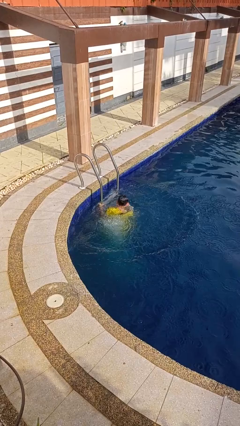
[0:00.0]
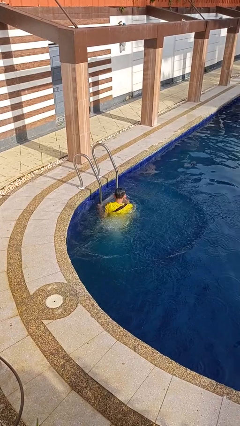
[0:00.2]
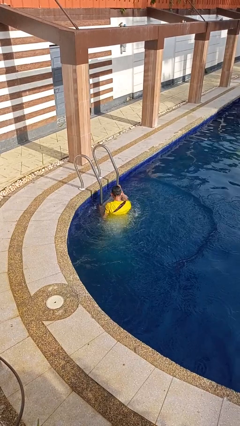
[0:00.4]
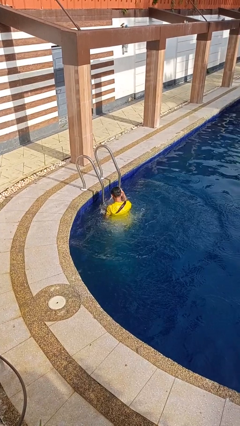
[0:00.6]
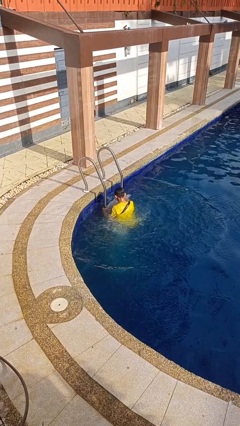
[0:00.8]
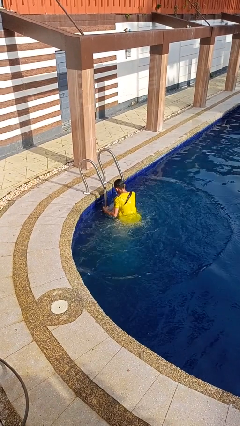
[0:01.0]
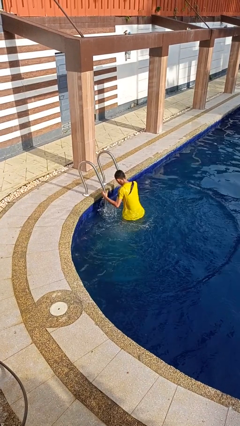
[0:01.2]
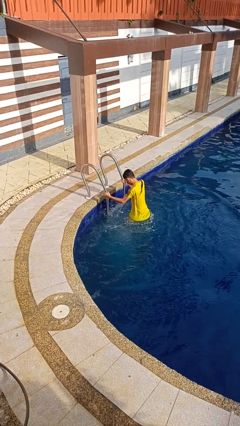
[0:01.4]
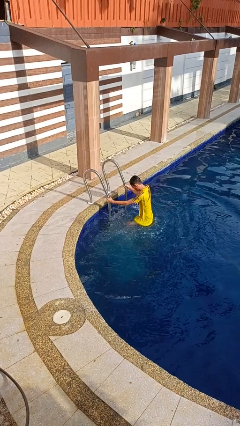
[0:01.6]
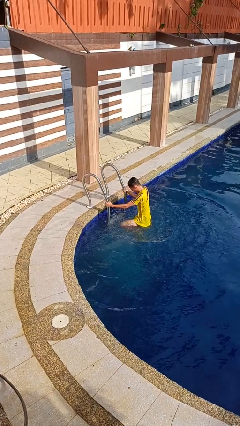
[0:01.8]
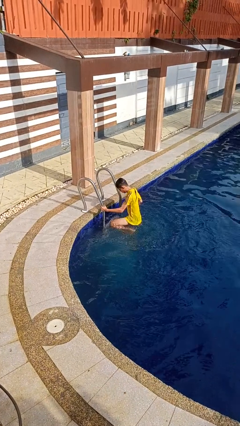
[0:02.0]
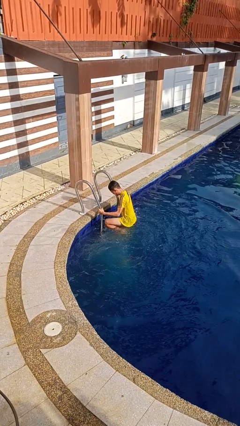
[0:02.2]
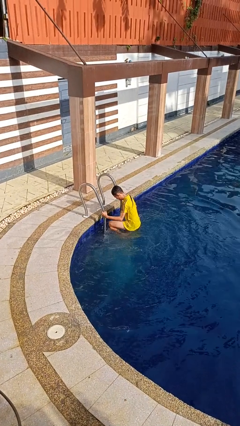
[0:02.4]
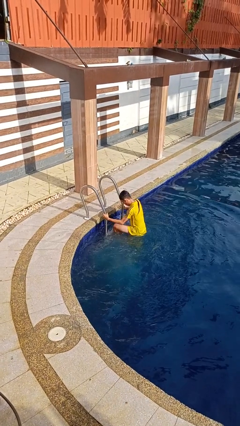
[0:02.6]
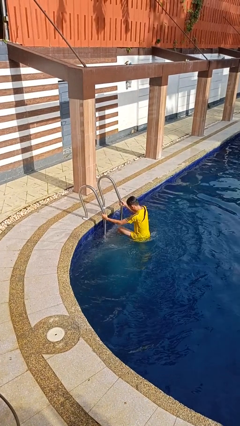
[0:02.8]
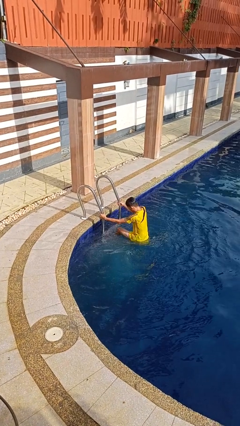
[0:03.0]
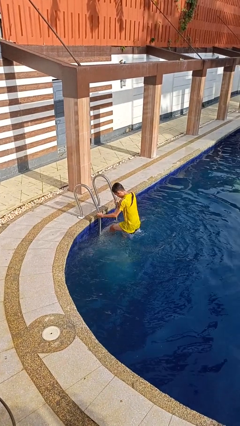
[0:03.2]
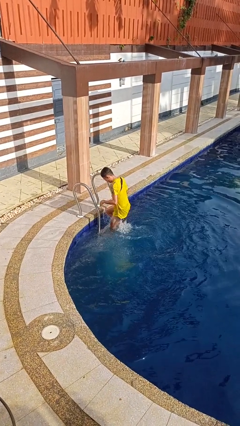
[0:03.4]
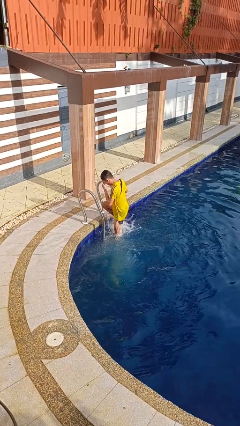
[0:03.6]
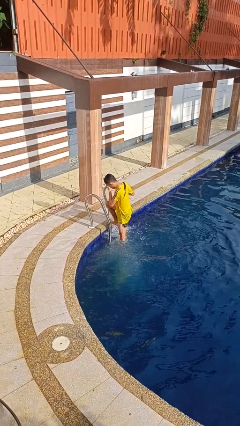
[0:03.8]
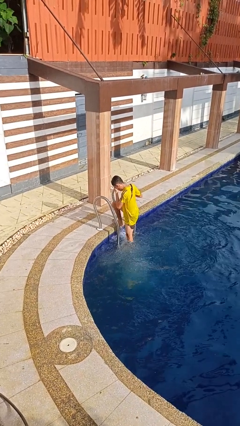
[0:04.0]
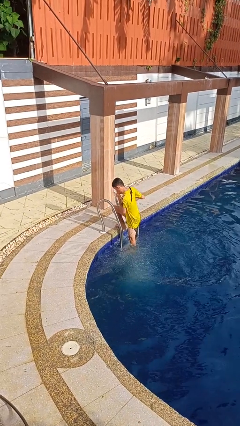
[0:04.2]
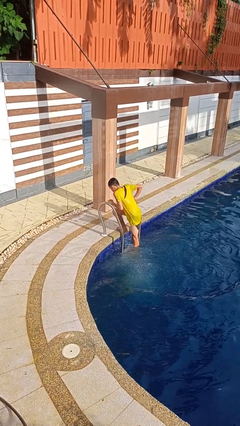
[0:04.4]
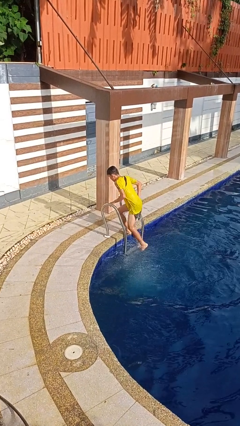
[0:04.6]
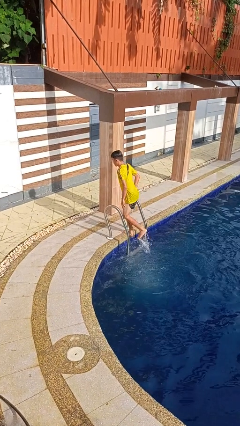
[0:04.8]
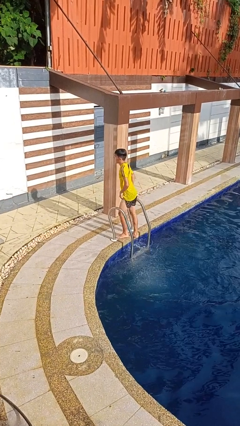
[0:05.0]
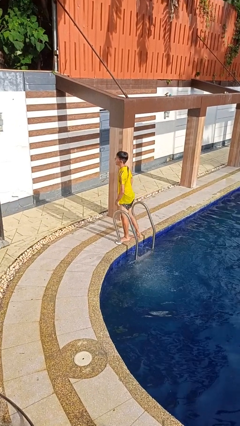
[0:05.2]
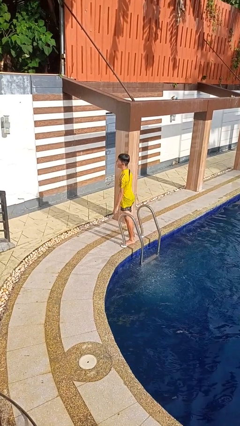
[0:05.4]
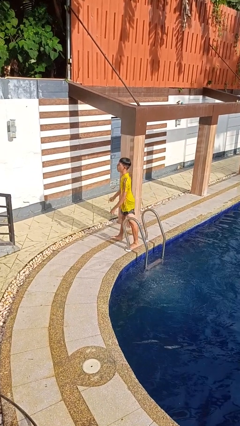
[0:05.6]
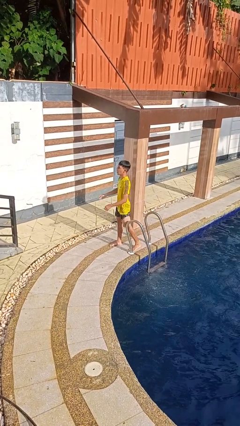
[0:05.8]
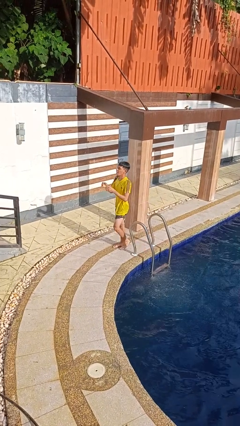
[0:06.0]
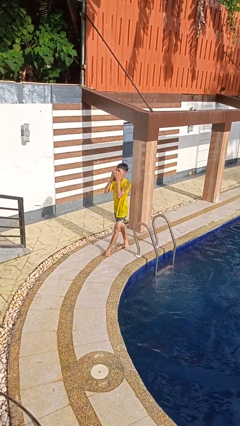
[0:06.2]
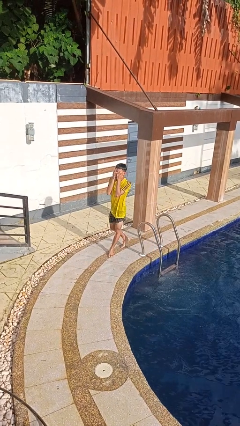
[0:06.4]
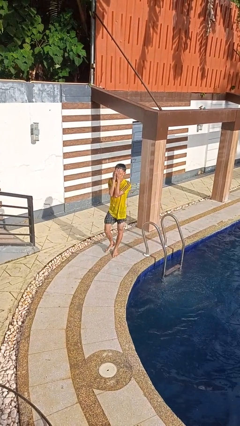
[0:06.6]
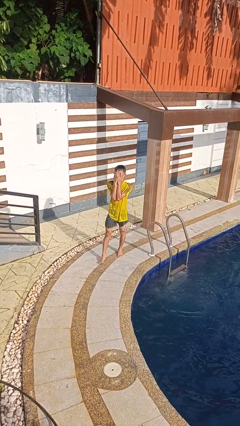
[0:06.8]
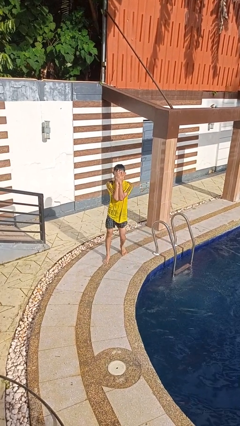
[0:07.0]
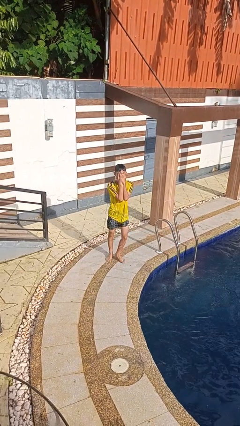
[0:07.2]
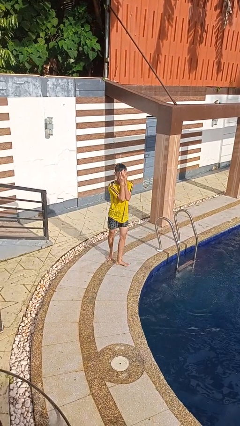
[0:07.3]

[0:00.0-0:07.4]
person exits pool

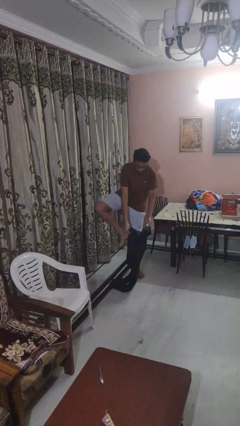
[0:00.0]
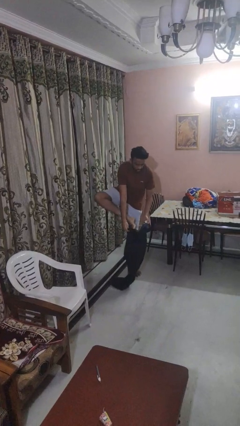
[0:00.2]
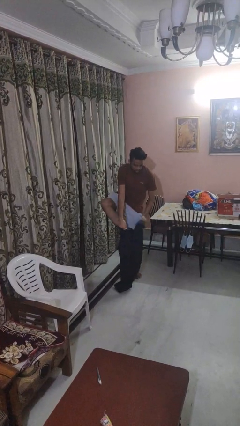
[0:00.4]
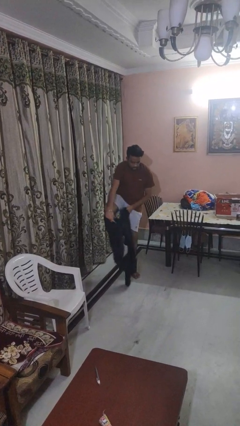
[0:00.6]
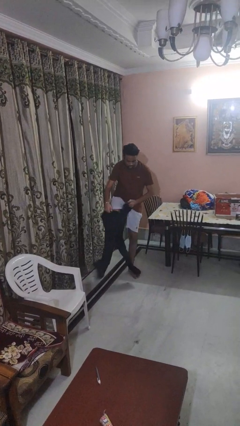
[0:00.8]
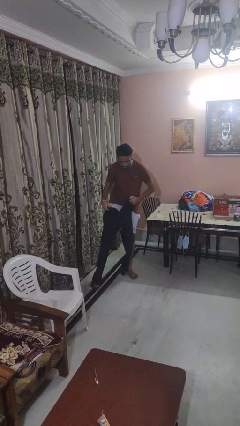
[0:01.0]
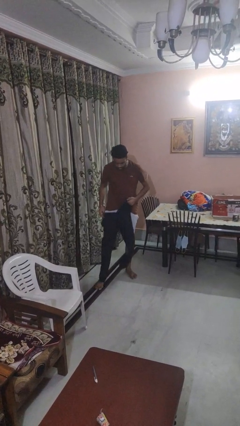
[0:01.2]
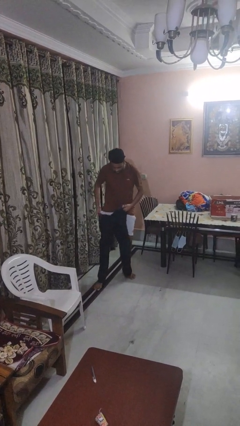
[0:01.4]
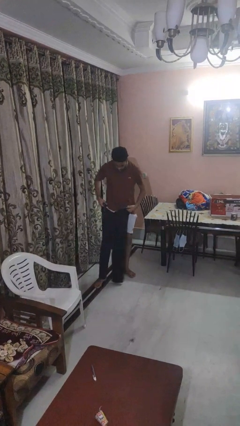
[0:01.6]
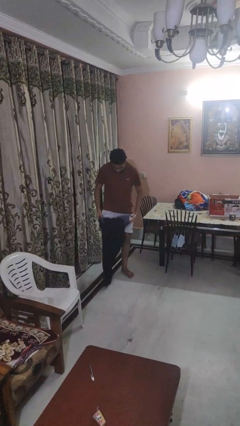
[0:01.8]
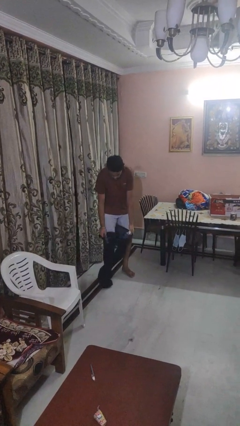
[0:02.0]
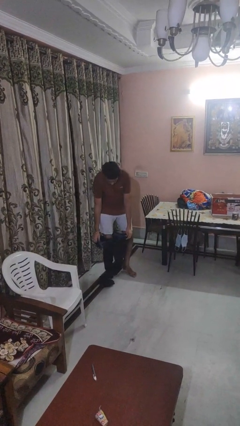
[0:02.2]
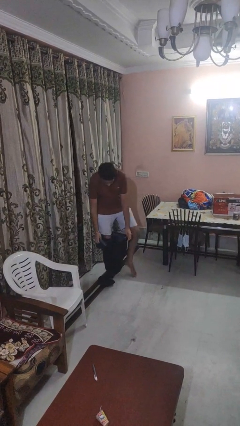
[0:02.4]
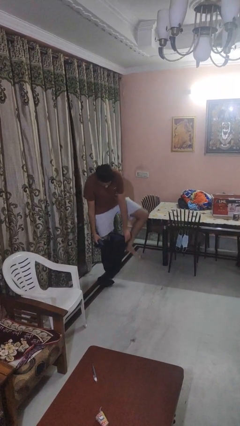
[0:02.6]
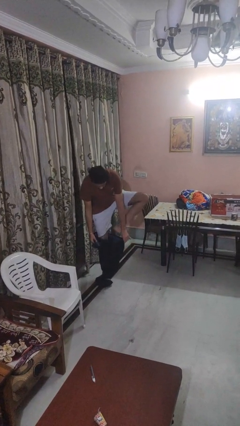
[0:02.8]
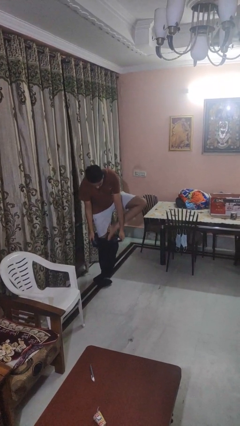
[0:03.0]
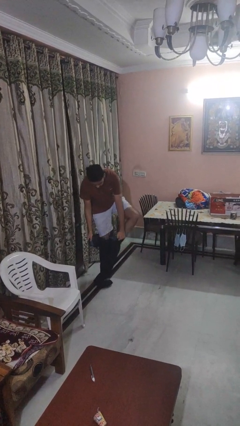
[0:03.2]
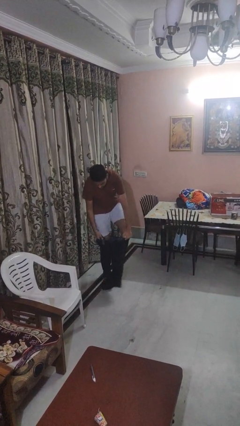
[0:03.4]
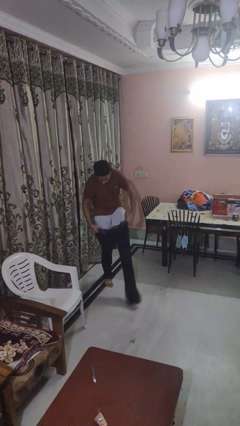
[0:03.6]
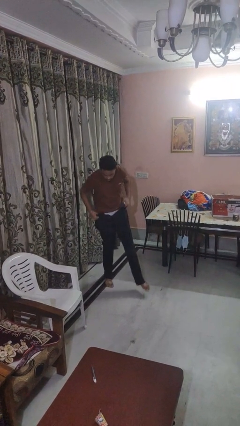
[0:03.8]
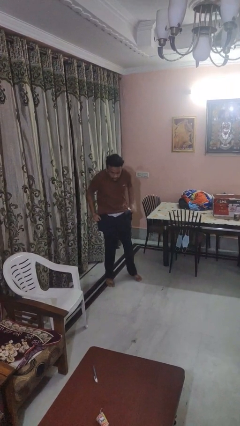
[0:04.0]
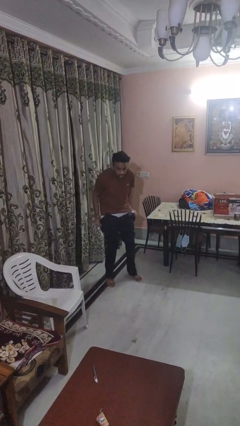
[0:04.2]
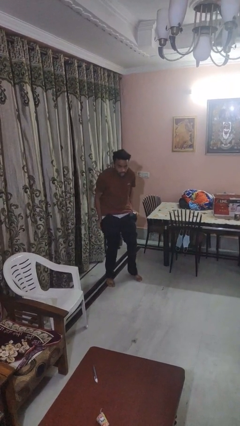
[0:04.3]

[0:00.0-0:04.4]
person puts on pants

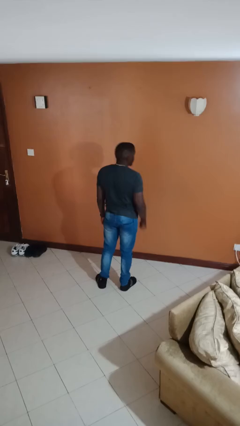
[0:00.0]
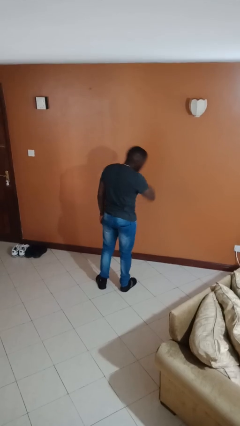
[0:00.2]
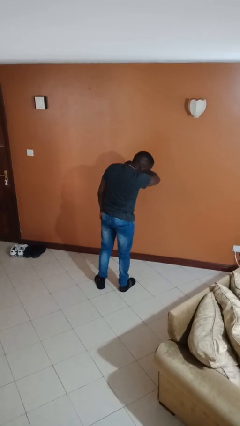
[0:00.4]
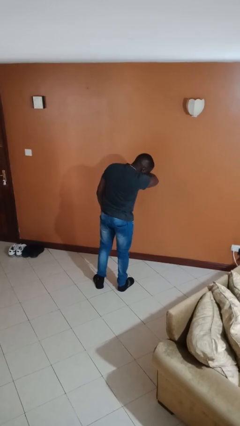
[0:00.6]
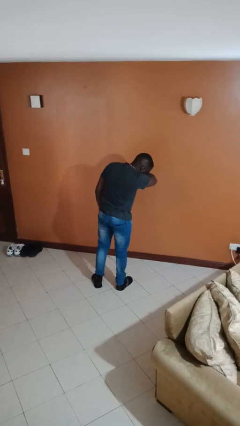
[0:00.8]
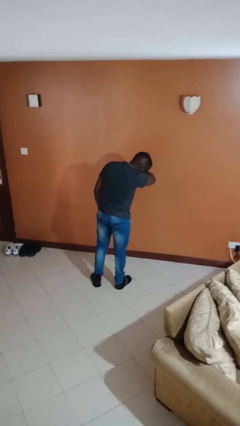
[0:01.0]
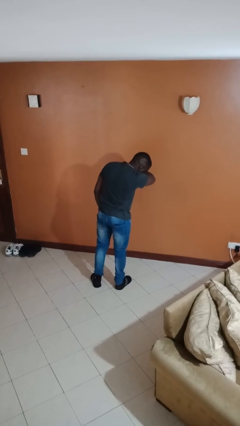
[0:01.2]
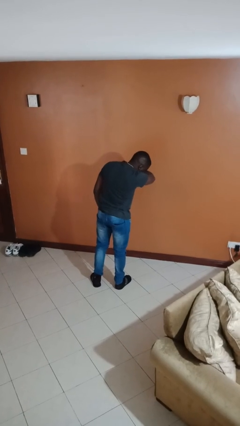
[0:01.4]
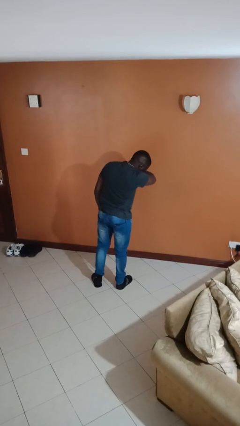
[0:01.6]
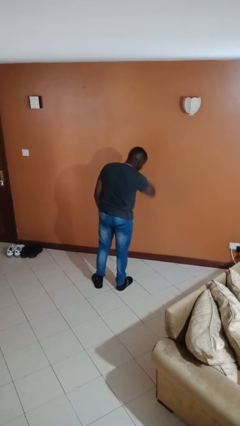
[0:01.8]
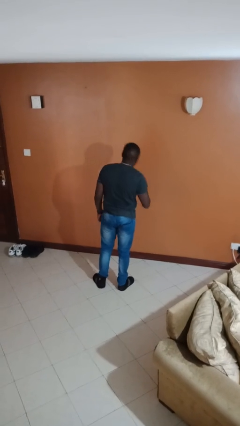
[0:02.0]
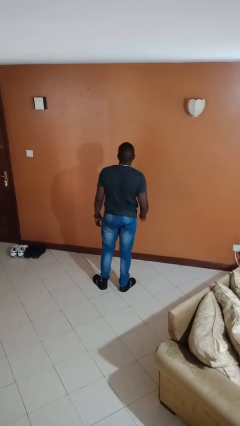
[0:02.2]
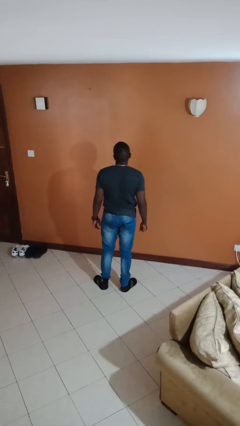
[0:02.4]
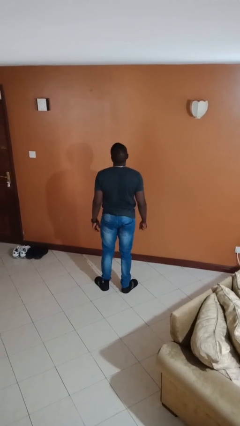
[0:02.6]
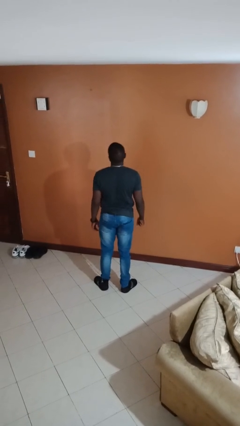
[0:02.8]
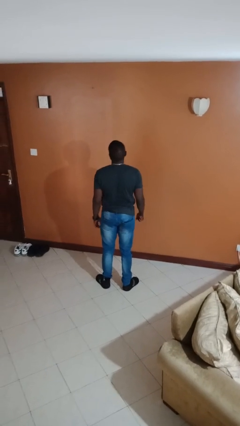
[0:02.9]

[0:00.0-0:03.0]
person sneezes into arm

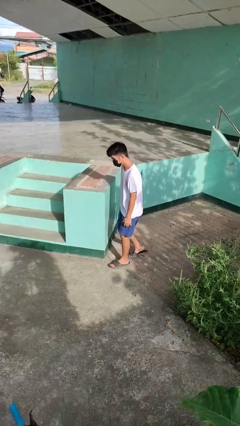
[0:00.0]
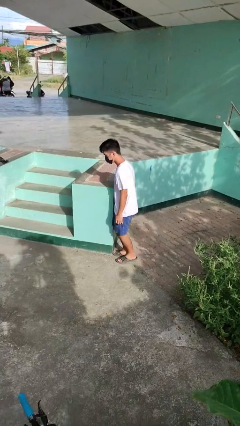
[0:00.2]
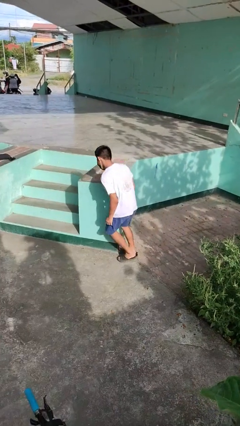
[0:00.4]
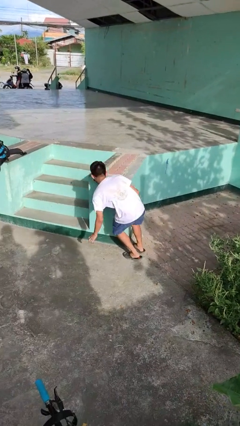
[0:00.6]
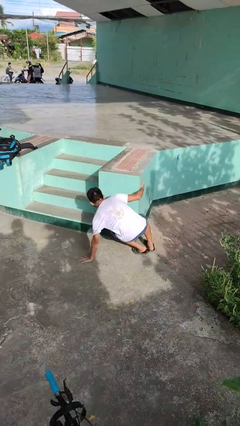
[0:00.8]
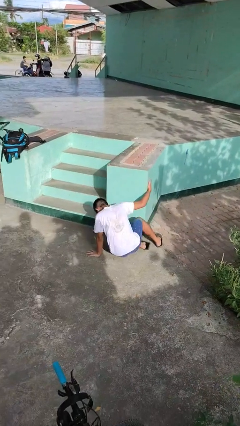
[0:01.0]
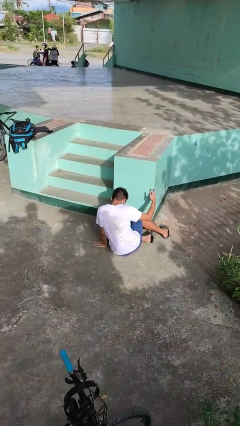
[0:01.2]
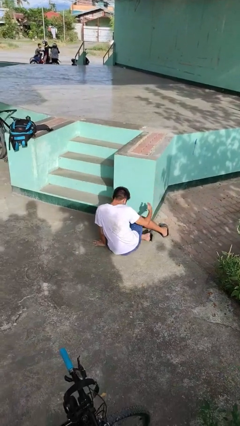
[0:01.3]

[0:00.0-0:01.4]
person trips on object on floor

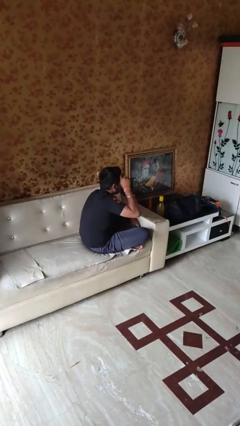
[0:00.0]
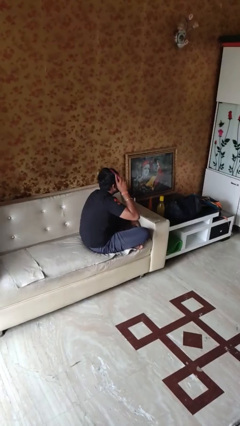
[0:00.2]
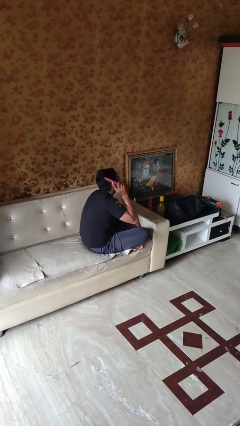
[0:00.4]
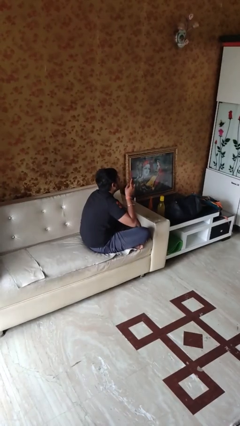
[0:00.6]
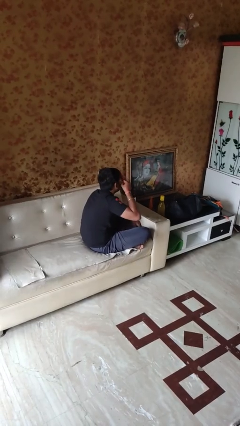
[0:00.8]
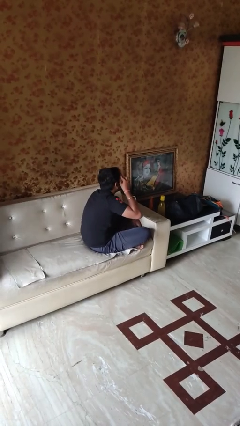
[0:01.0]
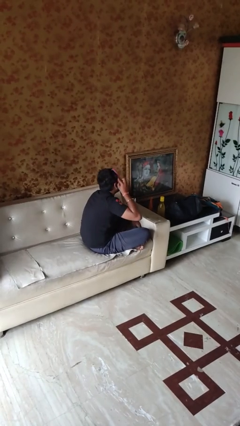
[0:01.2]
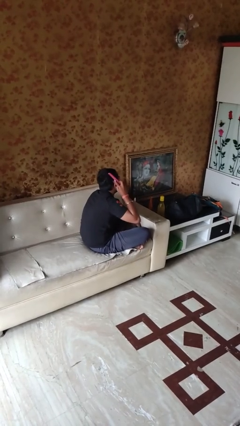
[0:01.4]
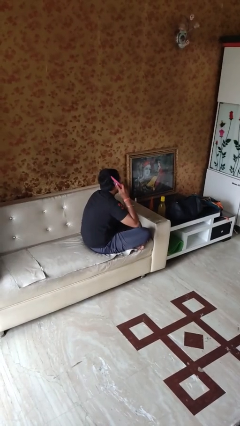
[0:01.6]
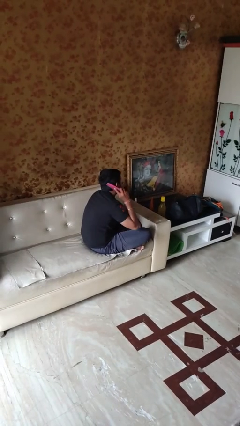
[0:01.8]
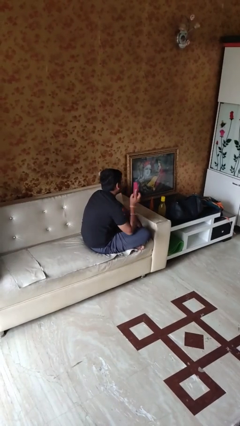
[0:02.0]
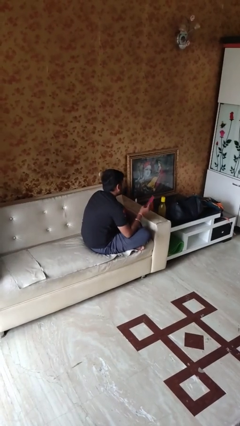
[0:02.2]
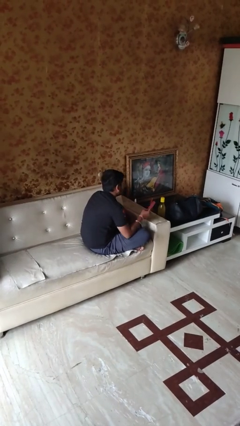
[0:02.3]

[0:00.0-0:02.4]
person brushes hair
